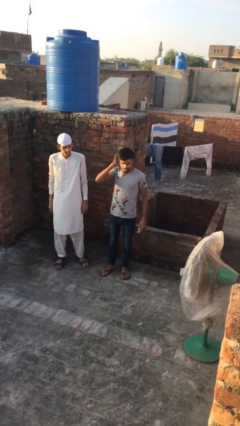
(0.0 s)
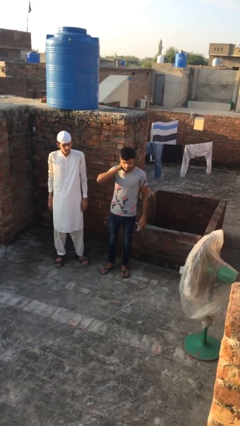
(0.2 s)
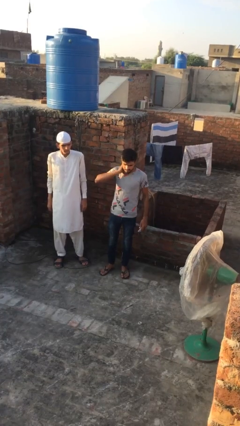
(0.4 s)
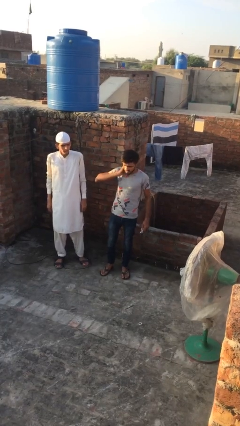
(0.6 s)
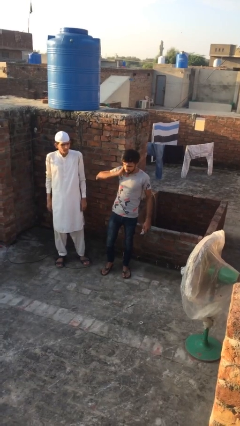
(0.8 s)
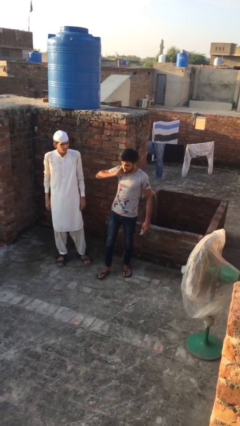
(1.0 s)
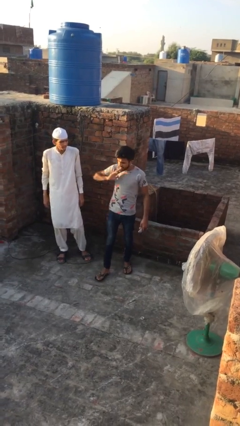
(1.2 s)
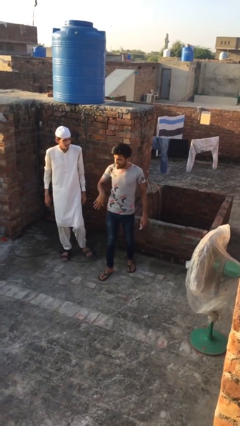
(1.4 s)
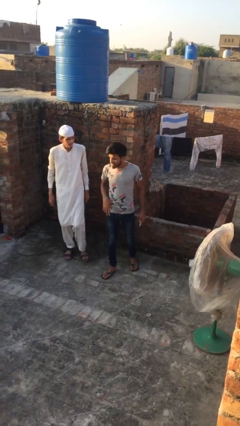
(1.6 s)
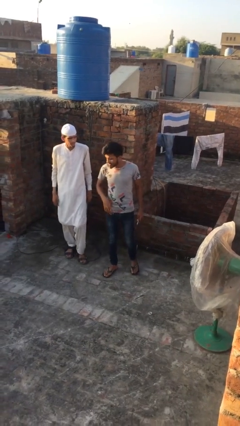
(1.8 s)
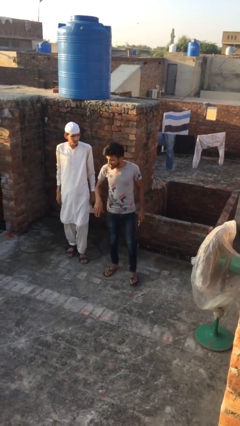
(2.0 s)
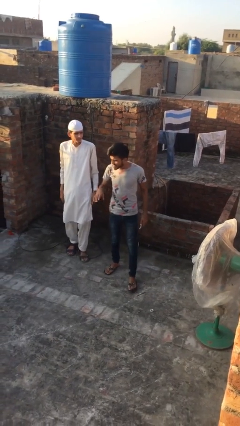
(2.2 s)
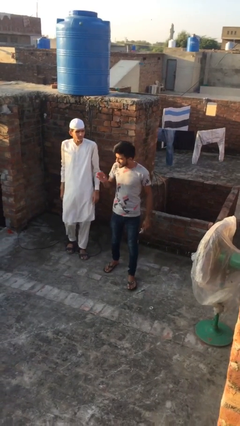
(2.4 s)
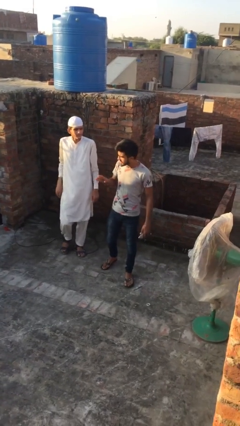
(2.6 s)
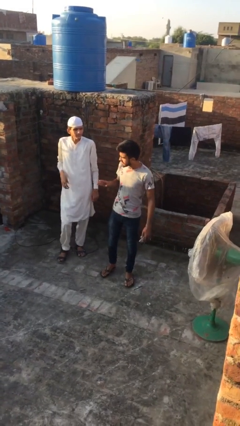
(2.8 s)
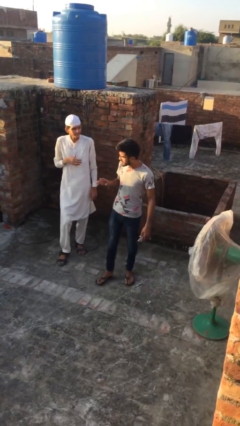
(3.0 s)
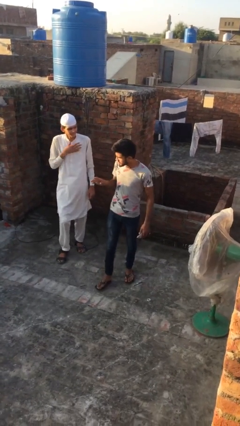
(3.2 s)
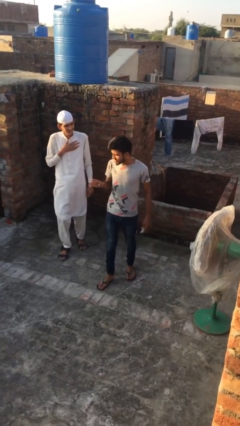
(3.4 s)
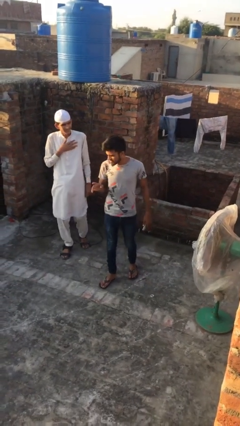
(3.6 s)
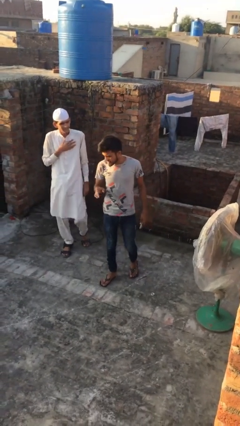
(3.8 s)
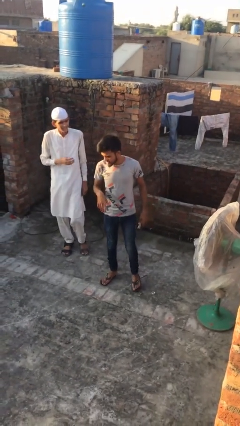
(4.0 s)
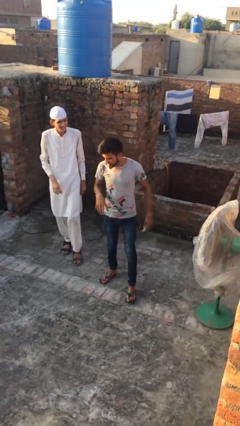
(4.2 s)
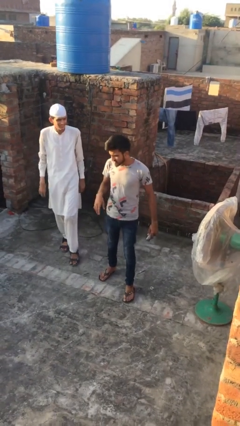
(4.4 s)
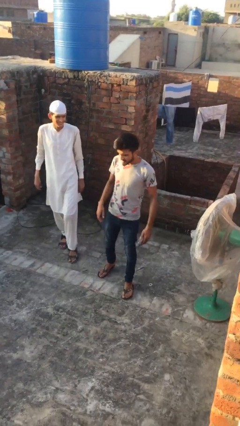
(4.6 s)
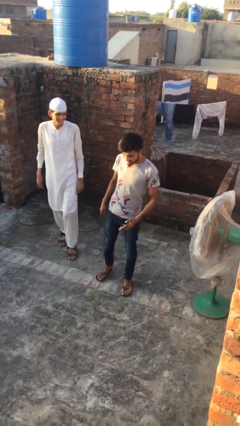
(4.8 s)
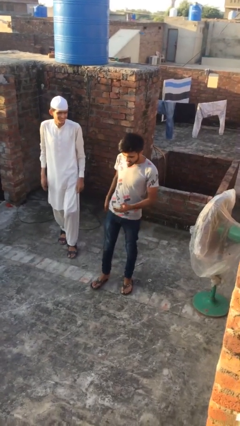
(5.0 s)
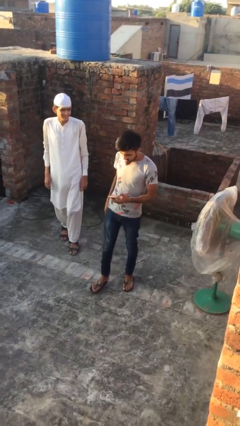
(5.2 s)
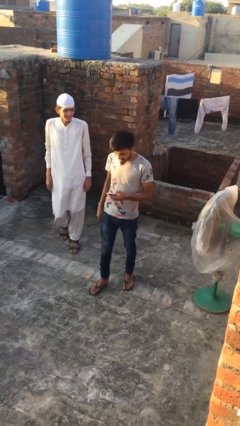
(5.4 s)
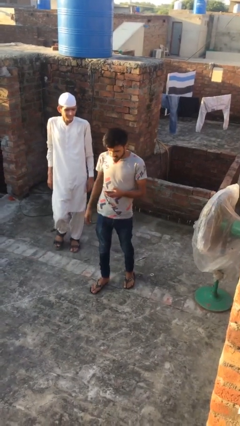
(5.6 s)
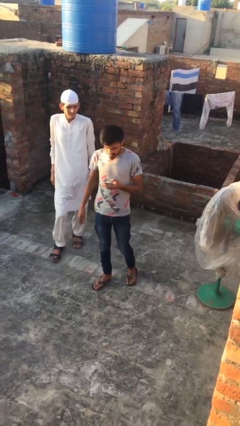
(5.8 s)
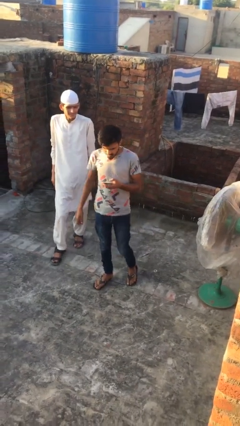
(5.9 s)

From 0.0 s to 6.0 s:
person talks to person

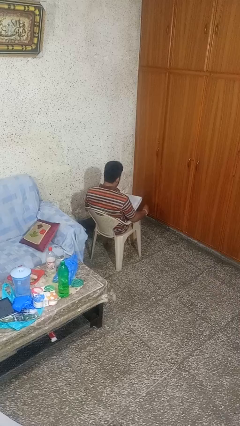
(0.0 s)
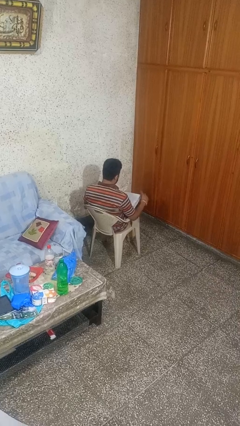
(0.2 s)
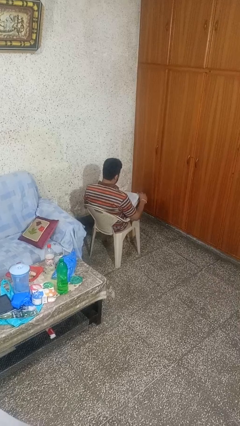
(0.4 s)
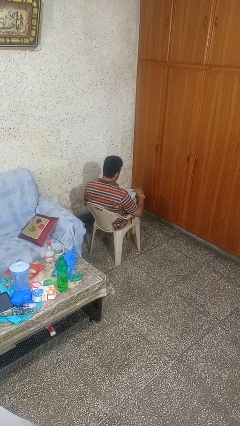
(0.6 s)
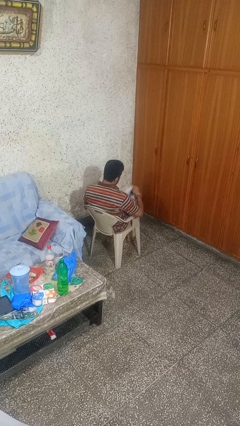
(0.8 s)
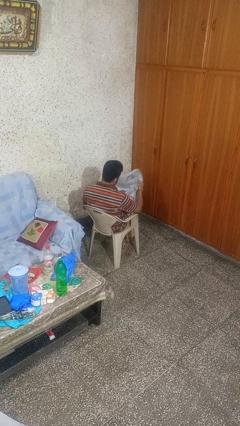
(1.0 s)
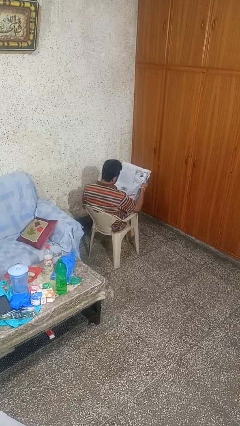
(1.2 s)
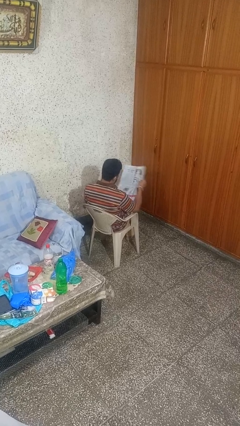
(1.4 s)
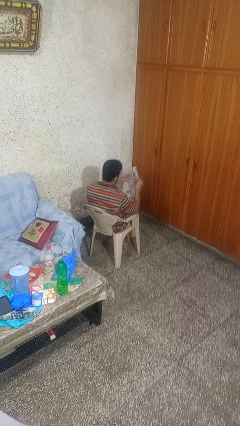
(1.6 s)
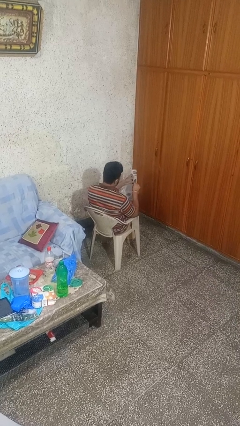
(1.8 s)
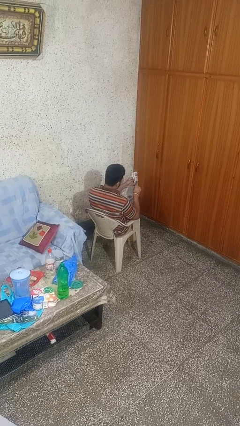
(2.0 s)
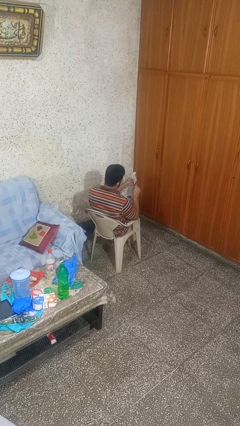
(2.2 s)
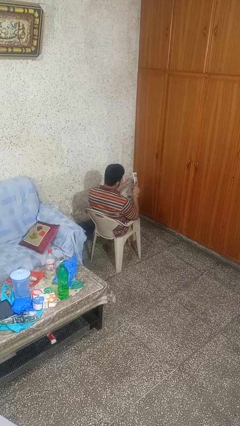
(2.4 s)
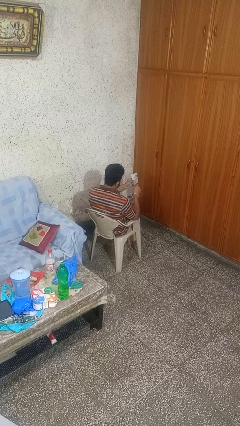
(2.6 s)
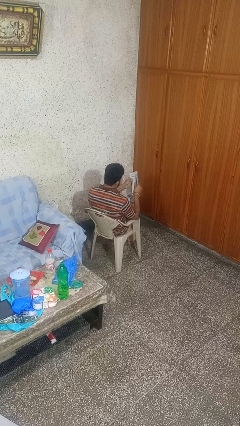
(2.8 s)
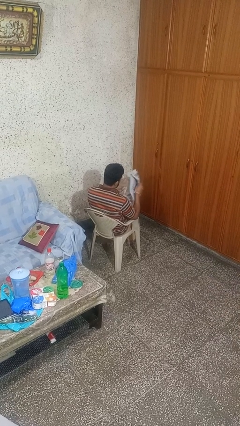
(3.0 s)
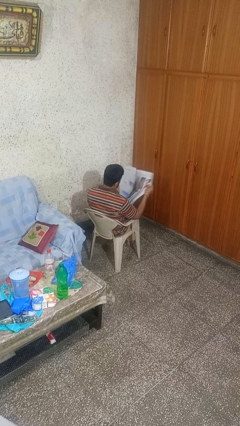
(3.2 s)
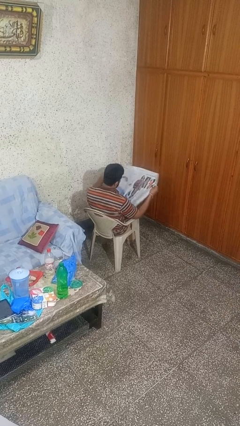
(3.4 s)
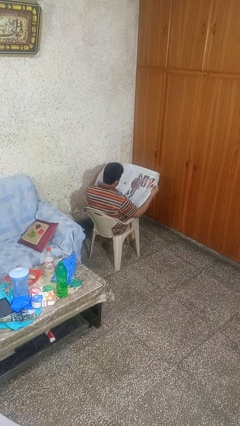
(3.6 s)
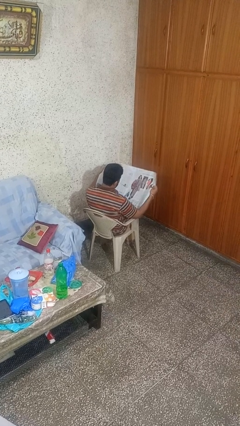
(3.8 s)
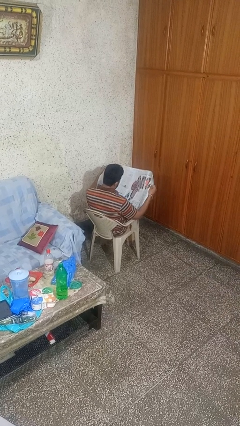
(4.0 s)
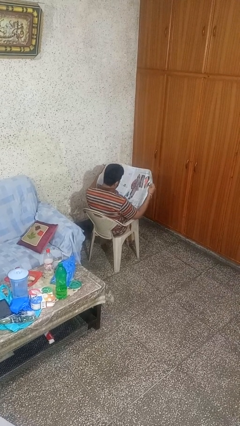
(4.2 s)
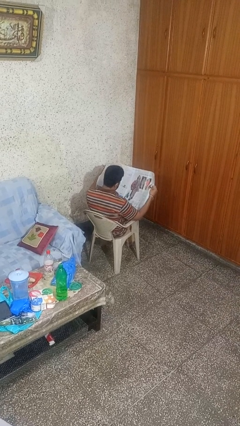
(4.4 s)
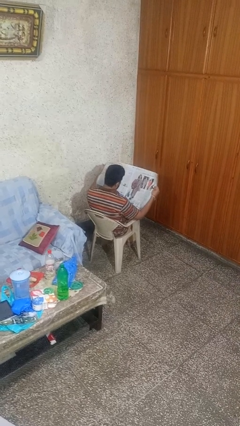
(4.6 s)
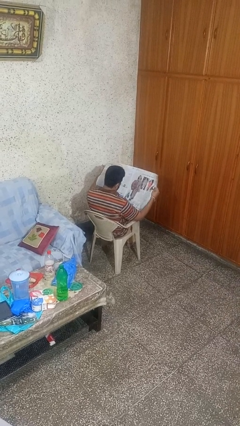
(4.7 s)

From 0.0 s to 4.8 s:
person reads newspaper

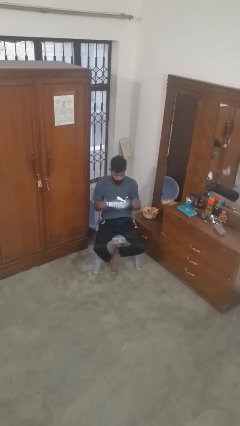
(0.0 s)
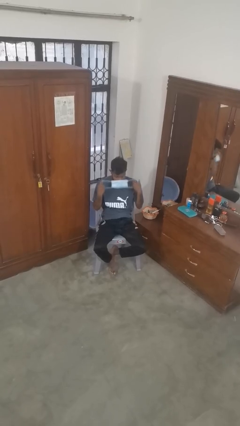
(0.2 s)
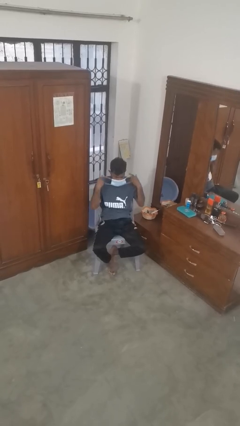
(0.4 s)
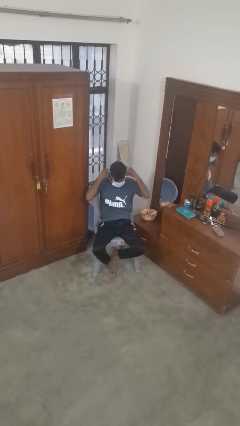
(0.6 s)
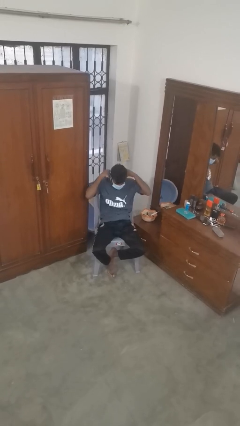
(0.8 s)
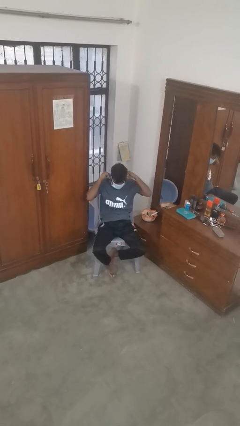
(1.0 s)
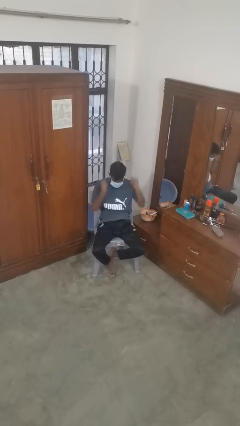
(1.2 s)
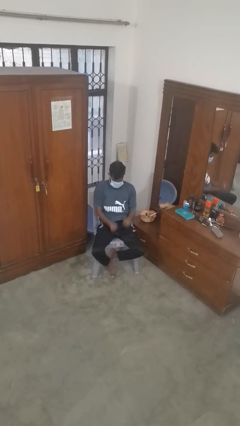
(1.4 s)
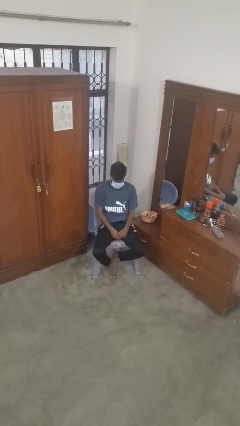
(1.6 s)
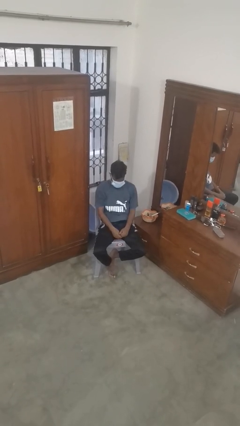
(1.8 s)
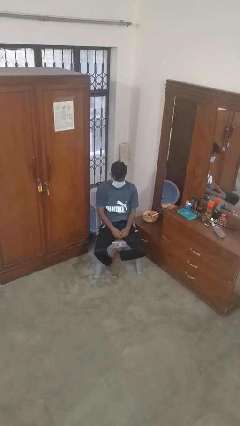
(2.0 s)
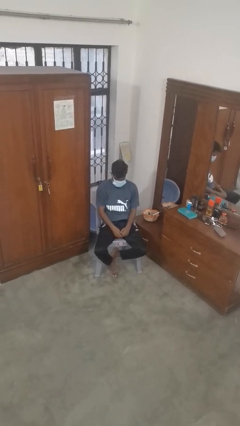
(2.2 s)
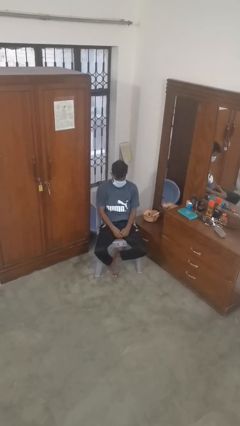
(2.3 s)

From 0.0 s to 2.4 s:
person puts on facemask

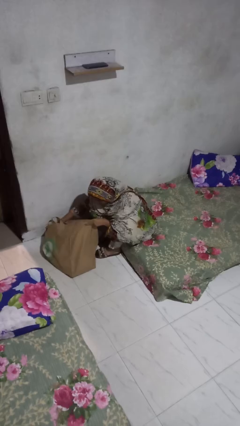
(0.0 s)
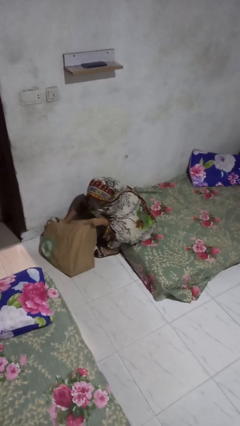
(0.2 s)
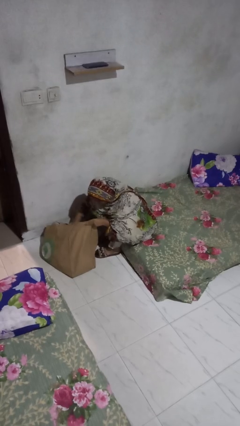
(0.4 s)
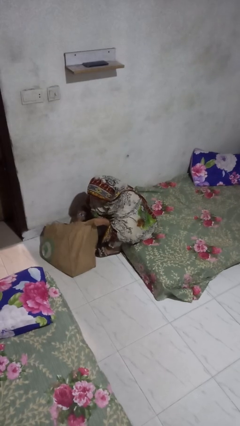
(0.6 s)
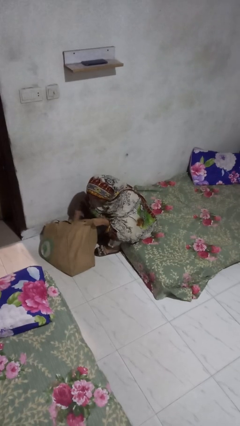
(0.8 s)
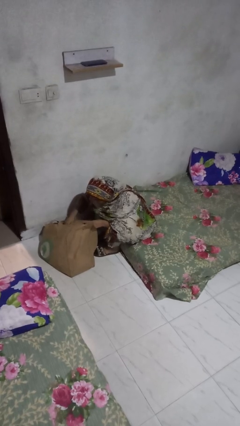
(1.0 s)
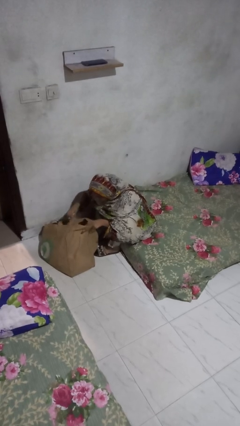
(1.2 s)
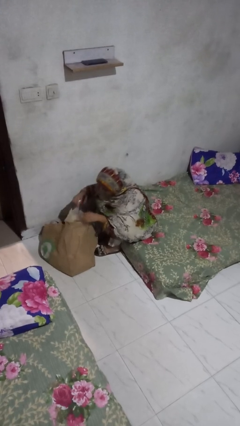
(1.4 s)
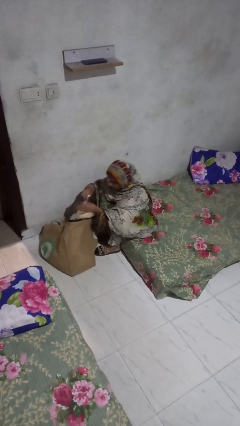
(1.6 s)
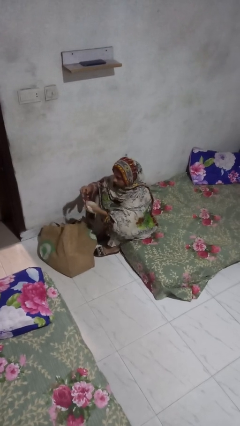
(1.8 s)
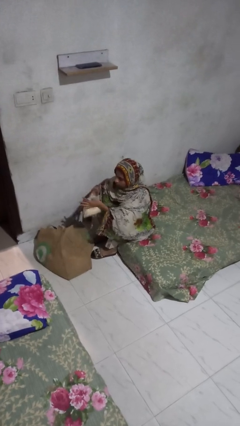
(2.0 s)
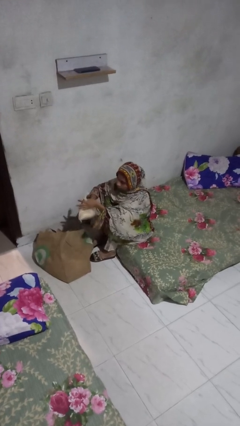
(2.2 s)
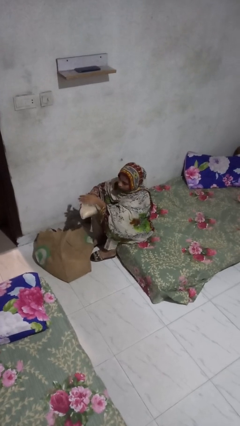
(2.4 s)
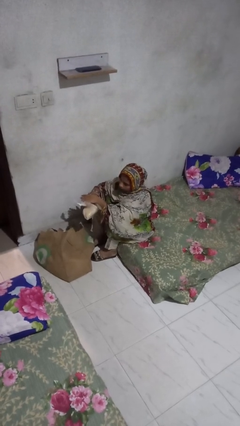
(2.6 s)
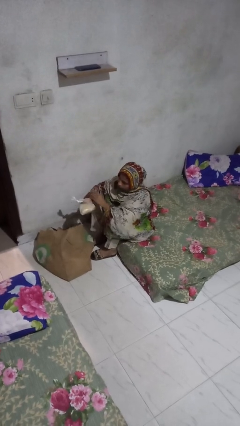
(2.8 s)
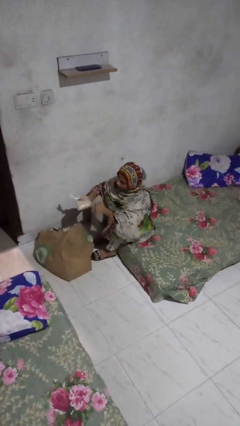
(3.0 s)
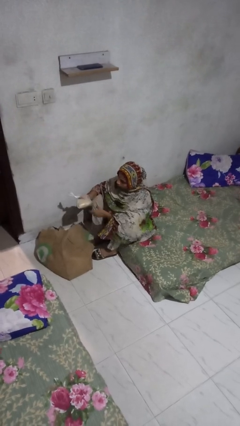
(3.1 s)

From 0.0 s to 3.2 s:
person takes object from bag

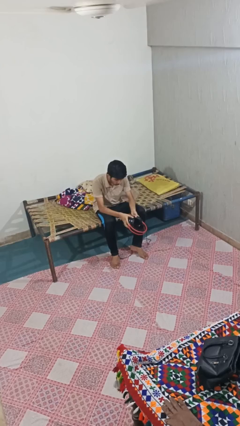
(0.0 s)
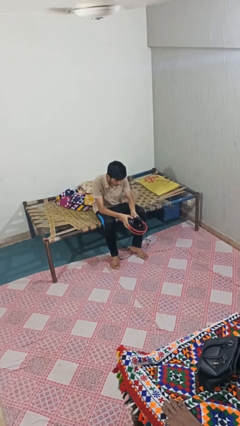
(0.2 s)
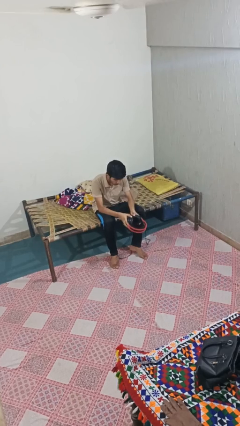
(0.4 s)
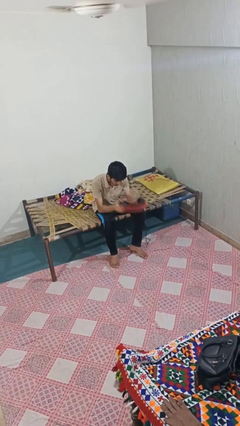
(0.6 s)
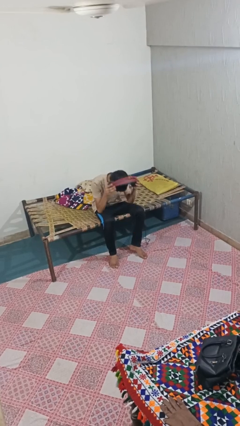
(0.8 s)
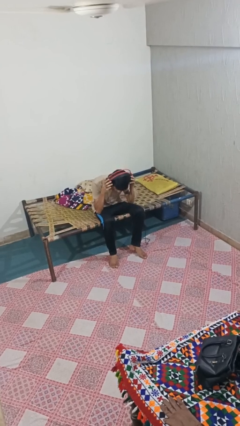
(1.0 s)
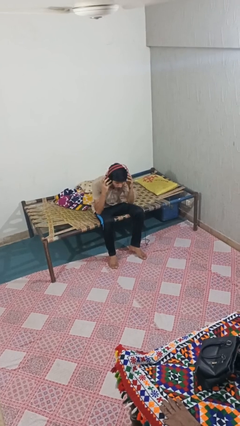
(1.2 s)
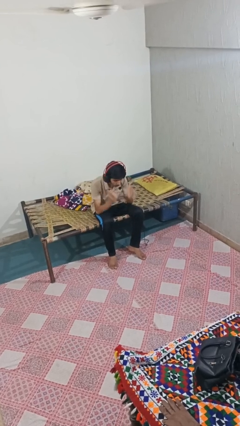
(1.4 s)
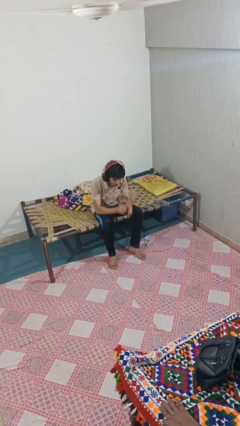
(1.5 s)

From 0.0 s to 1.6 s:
person puts on headphones
